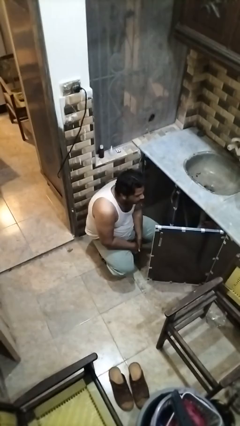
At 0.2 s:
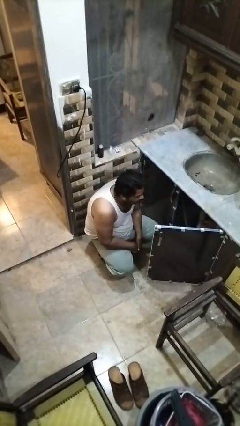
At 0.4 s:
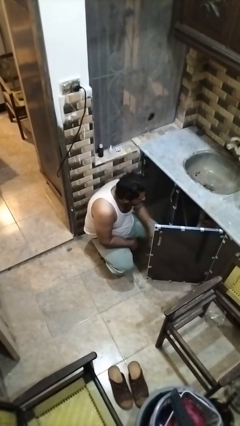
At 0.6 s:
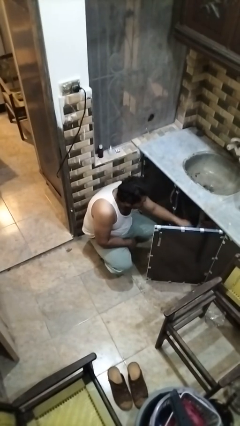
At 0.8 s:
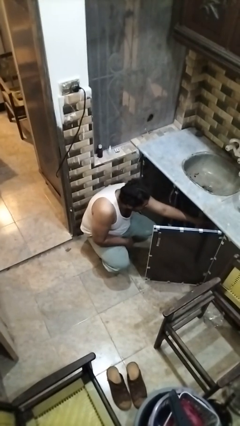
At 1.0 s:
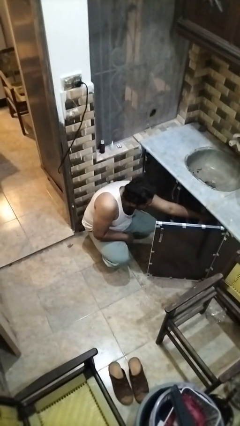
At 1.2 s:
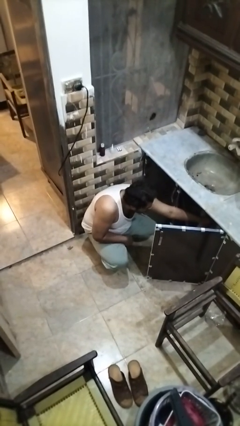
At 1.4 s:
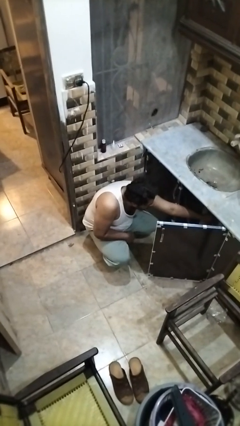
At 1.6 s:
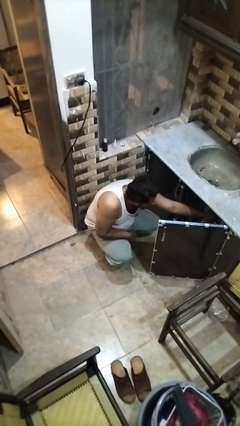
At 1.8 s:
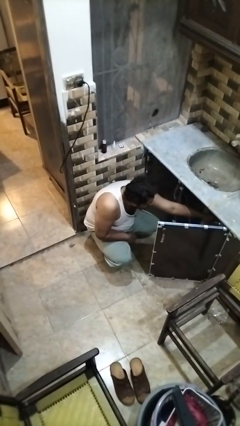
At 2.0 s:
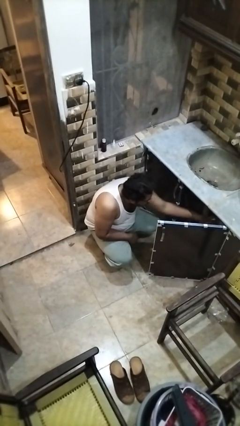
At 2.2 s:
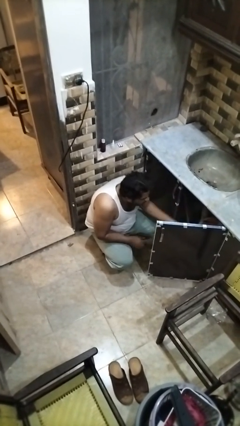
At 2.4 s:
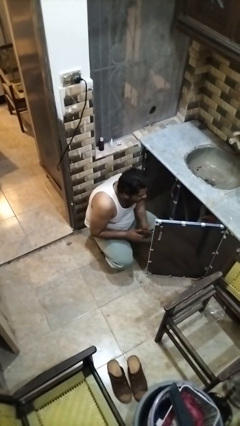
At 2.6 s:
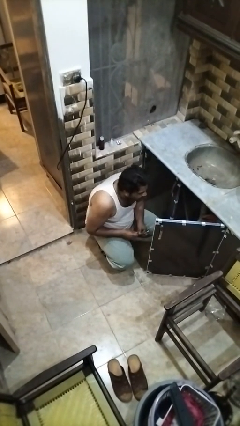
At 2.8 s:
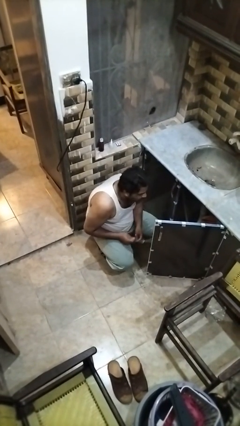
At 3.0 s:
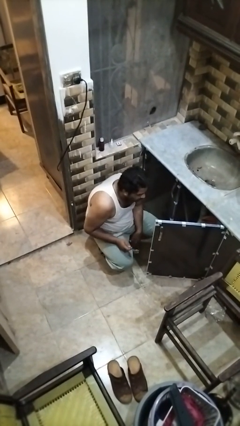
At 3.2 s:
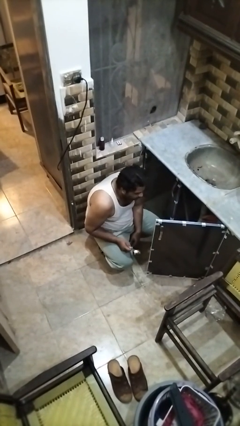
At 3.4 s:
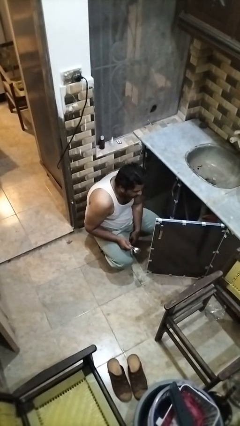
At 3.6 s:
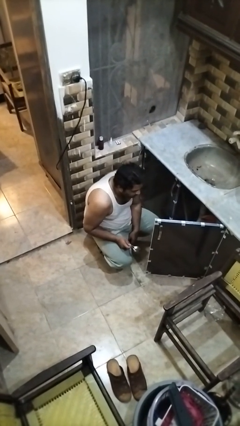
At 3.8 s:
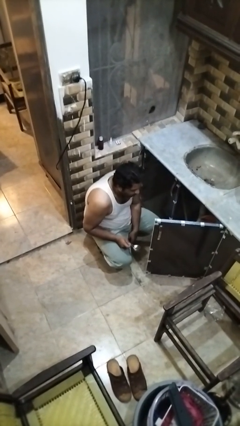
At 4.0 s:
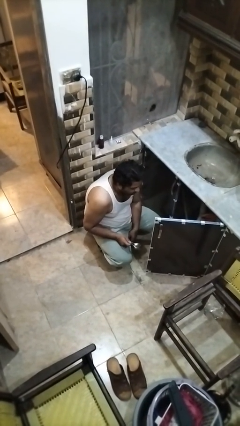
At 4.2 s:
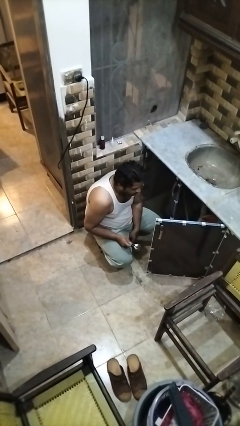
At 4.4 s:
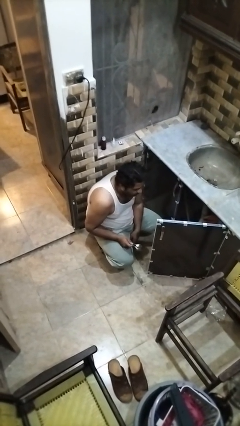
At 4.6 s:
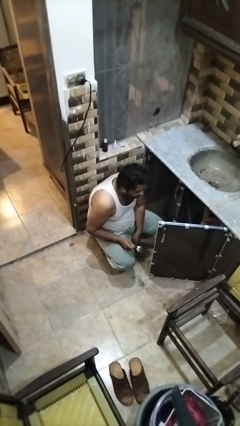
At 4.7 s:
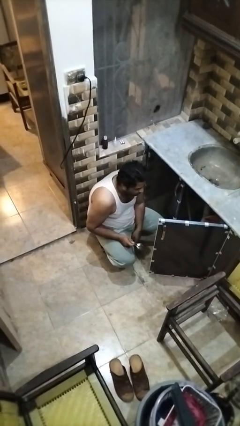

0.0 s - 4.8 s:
person takes object from kitchen drawer

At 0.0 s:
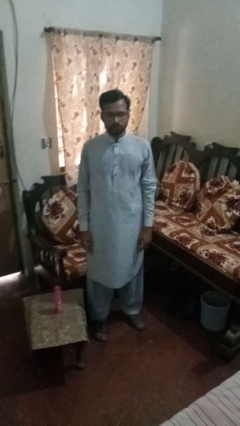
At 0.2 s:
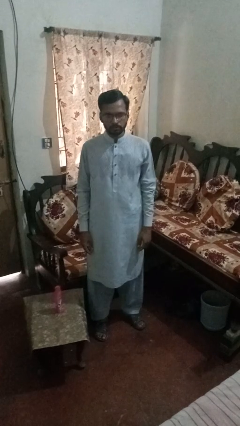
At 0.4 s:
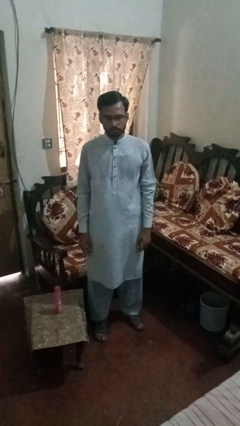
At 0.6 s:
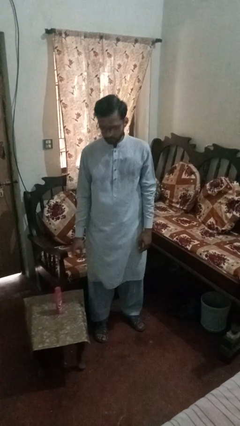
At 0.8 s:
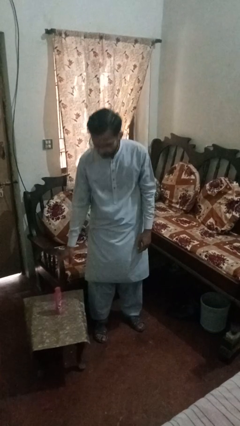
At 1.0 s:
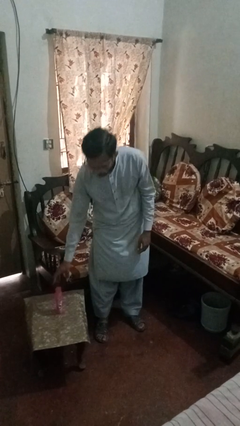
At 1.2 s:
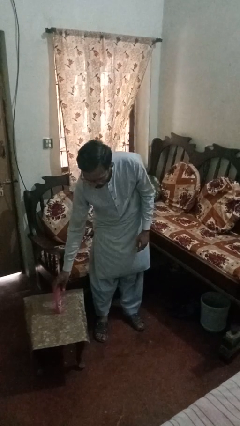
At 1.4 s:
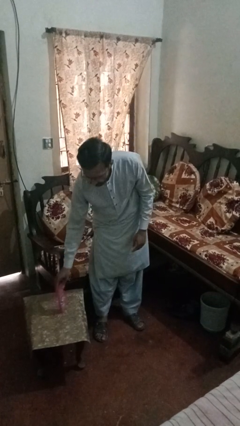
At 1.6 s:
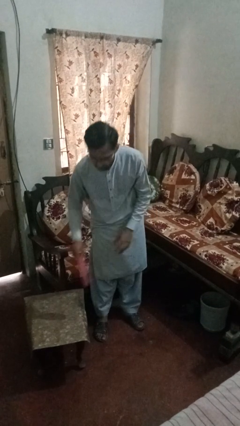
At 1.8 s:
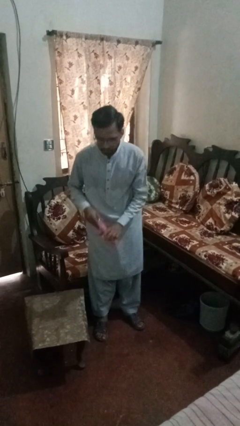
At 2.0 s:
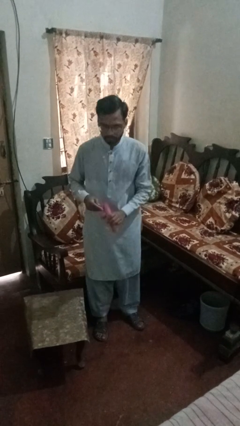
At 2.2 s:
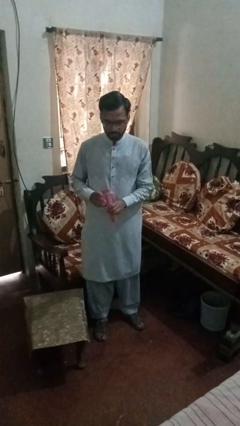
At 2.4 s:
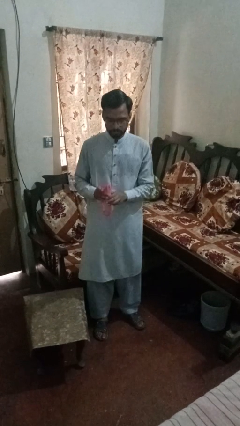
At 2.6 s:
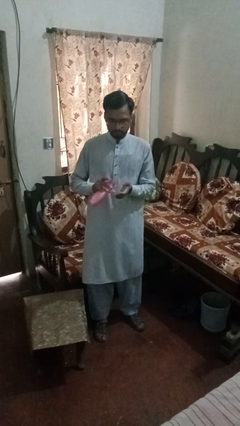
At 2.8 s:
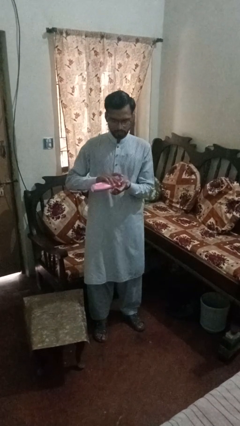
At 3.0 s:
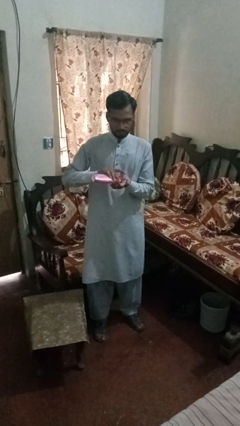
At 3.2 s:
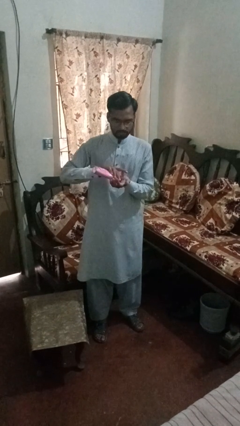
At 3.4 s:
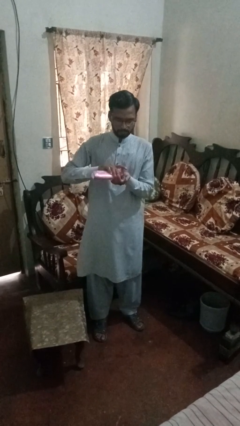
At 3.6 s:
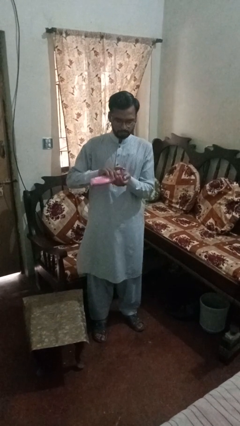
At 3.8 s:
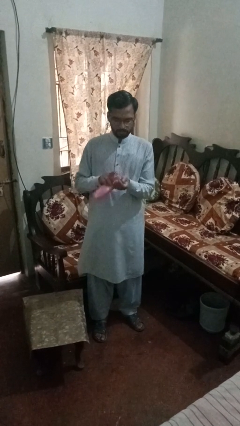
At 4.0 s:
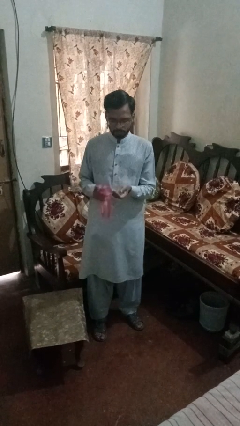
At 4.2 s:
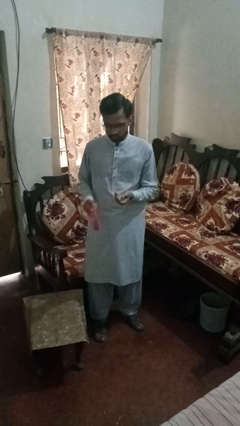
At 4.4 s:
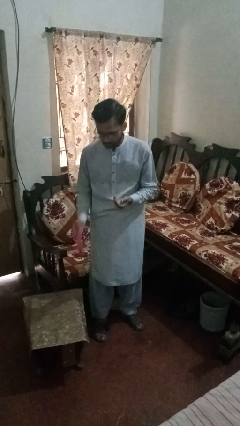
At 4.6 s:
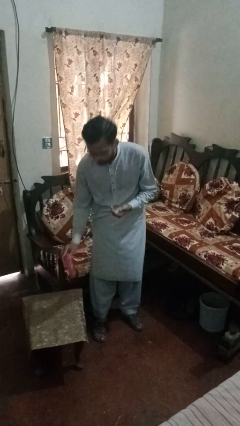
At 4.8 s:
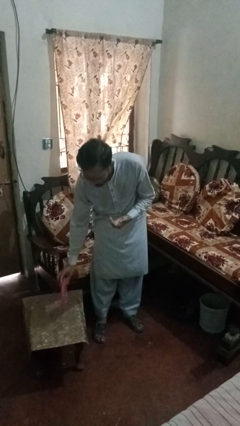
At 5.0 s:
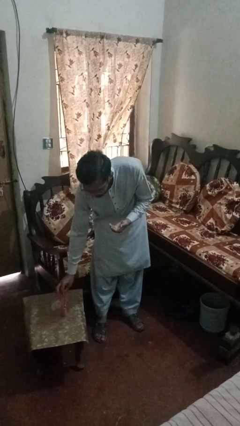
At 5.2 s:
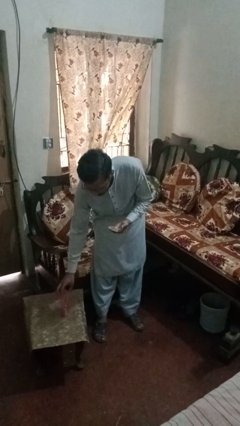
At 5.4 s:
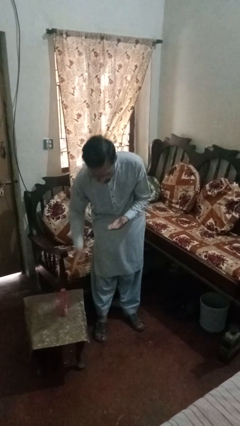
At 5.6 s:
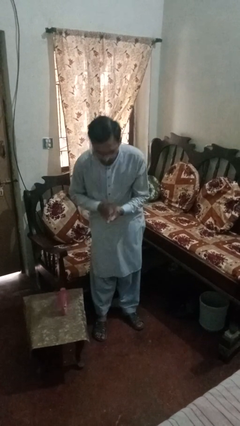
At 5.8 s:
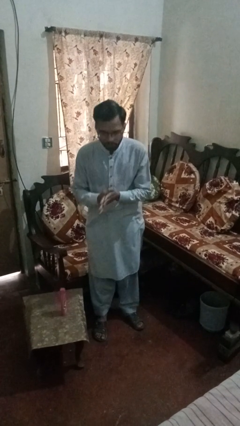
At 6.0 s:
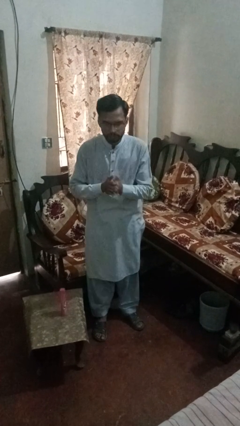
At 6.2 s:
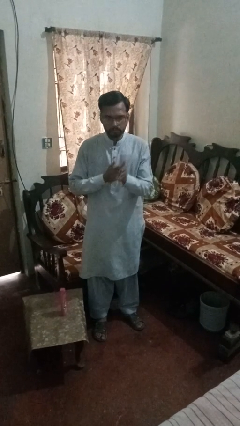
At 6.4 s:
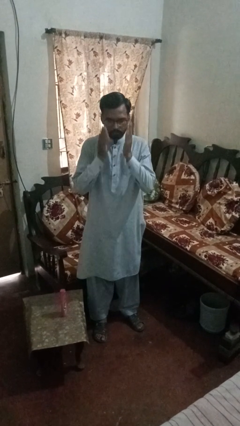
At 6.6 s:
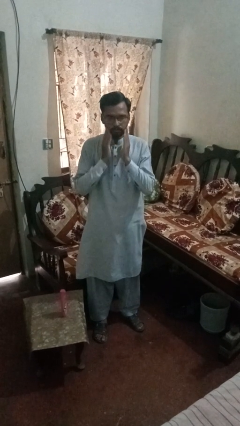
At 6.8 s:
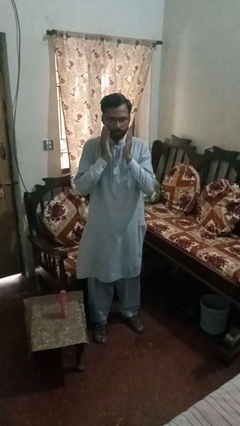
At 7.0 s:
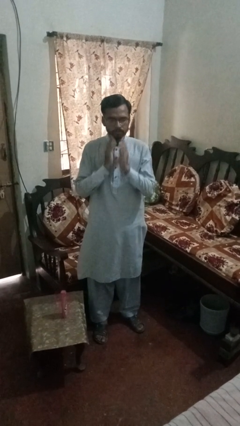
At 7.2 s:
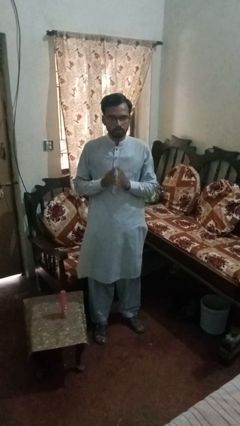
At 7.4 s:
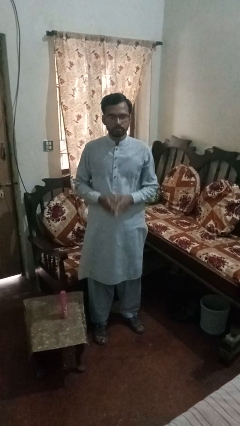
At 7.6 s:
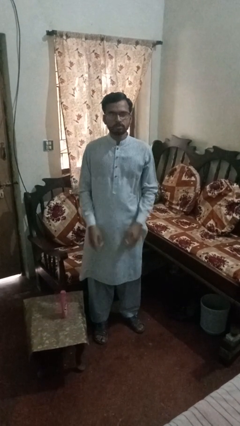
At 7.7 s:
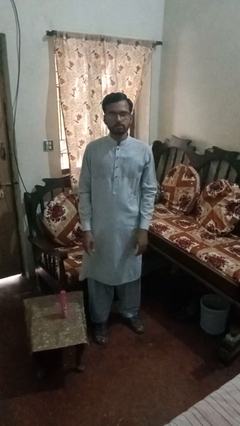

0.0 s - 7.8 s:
person applies sunscreen

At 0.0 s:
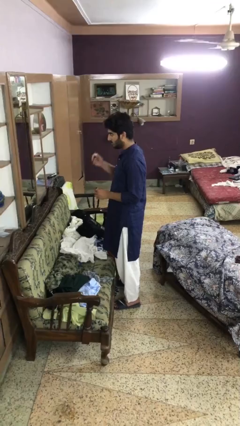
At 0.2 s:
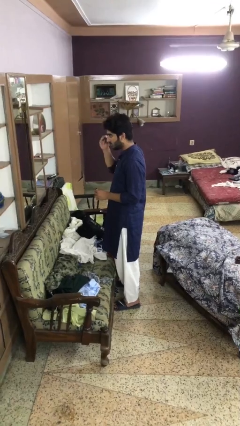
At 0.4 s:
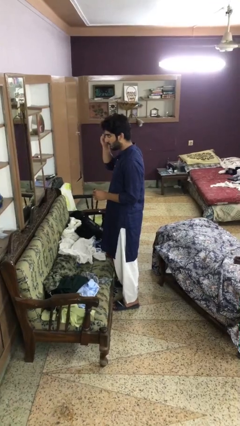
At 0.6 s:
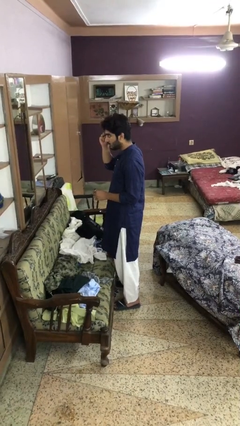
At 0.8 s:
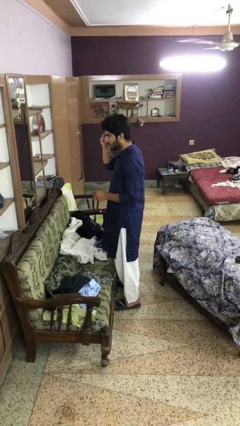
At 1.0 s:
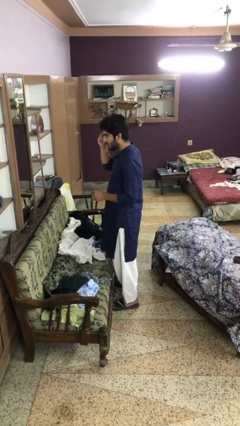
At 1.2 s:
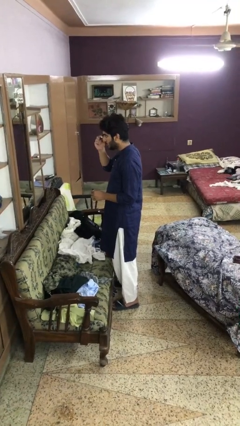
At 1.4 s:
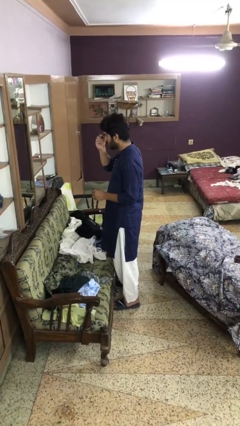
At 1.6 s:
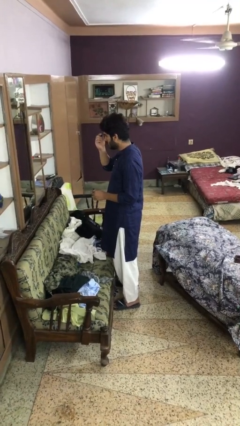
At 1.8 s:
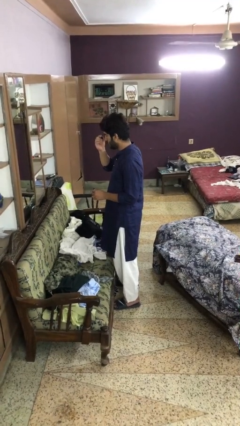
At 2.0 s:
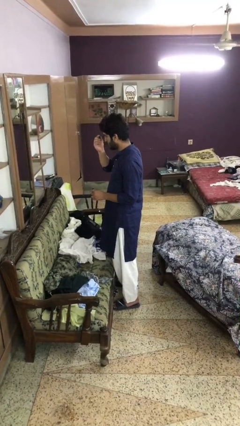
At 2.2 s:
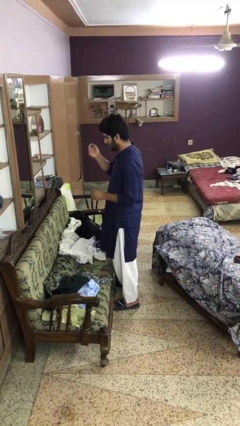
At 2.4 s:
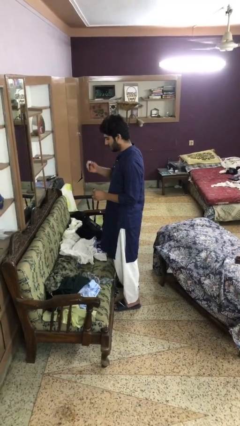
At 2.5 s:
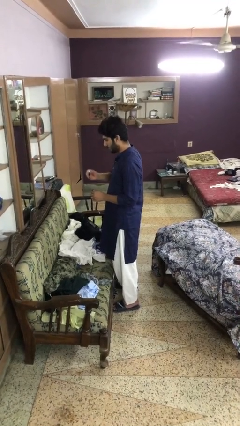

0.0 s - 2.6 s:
person applies eye makeup

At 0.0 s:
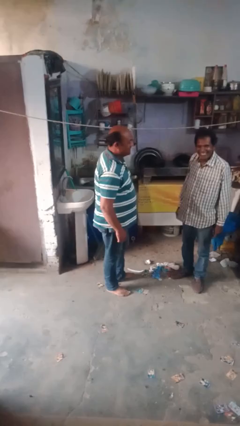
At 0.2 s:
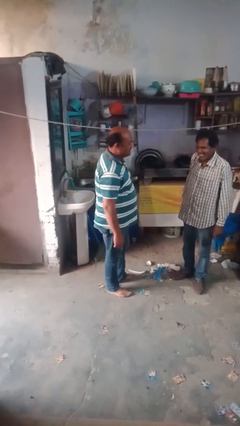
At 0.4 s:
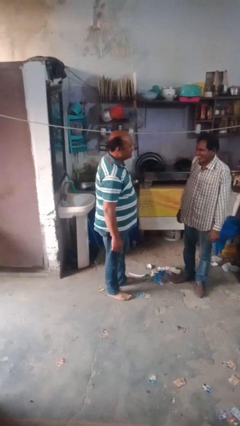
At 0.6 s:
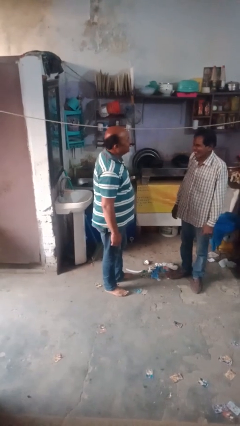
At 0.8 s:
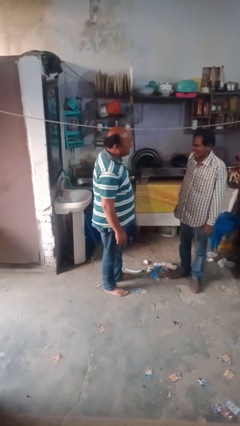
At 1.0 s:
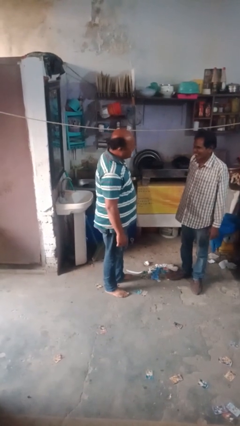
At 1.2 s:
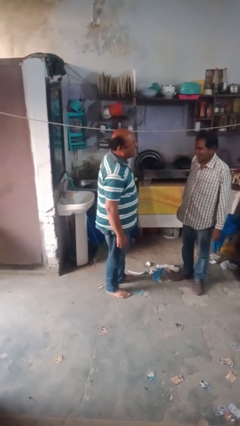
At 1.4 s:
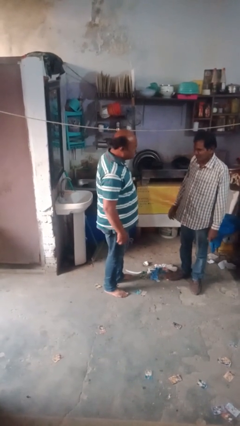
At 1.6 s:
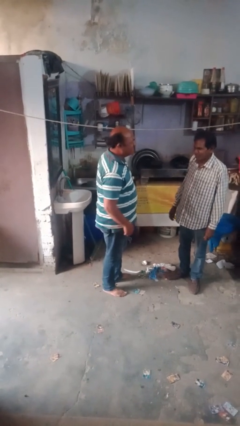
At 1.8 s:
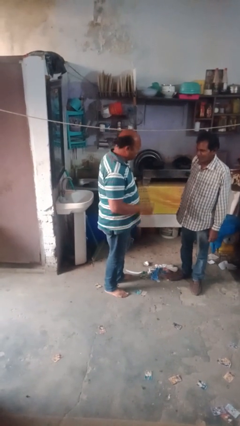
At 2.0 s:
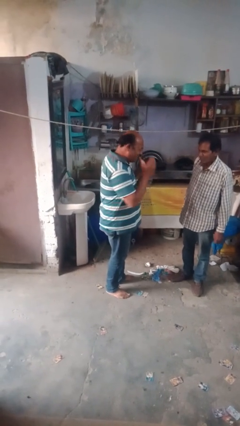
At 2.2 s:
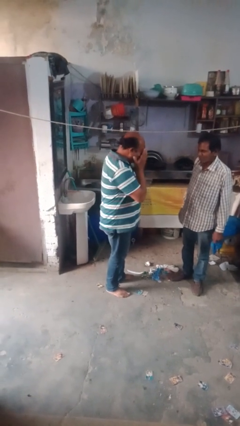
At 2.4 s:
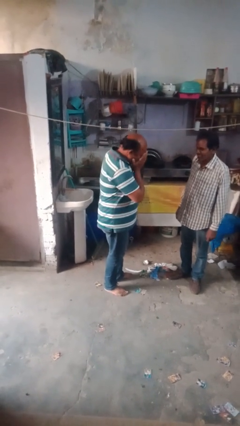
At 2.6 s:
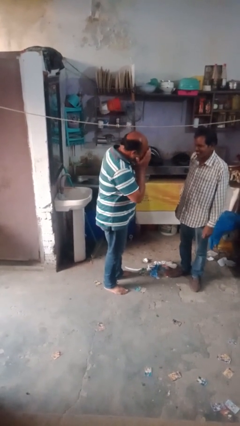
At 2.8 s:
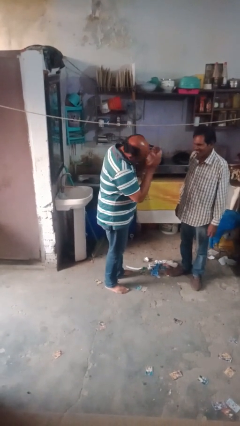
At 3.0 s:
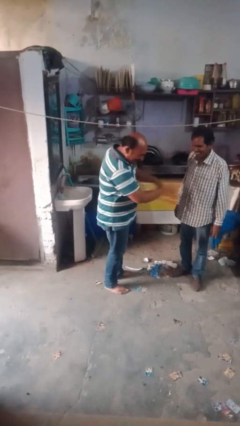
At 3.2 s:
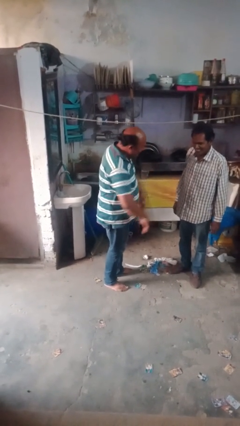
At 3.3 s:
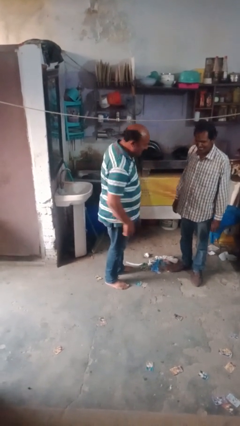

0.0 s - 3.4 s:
person laughs with person
